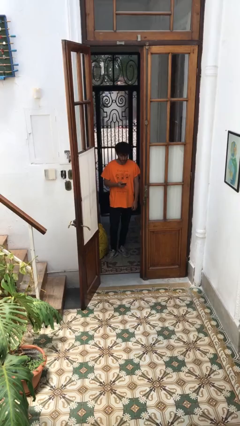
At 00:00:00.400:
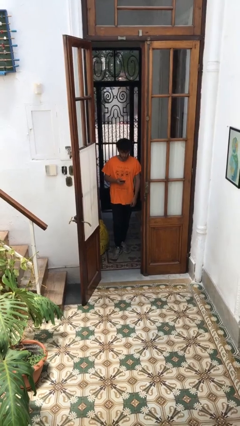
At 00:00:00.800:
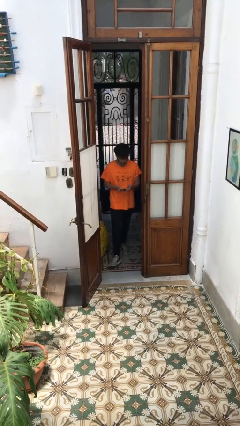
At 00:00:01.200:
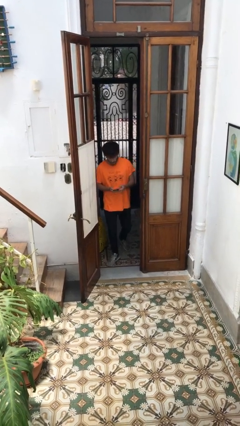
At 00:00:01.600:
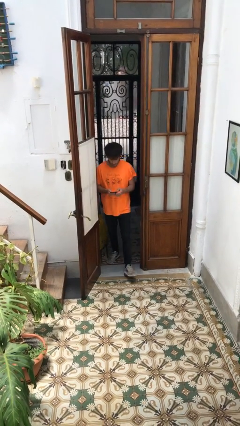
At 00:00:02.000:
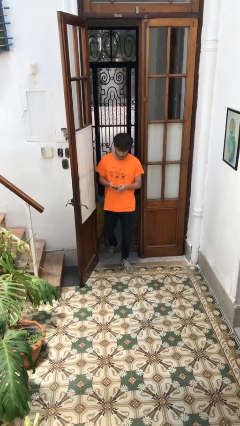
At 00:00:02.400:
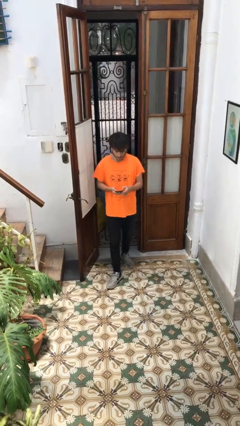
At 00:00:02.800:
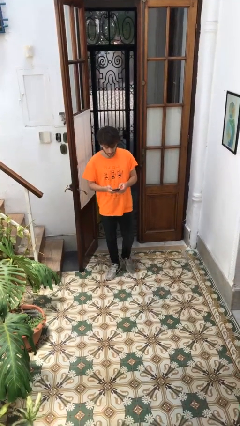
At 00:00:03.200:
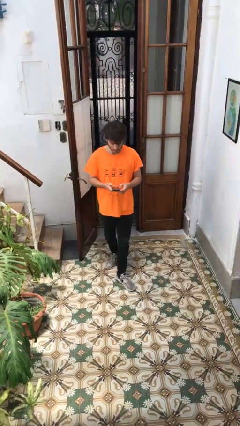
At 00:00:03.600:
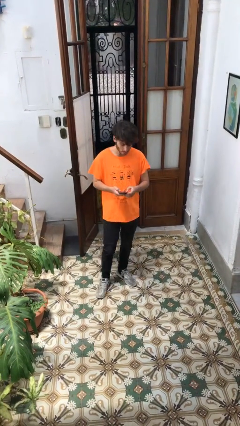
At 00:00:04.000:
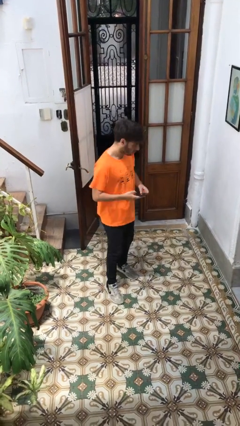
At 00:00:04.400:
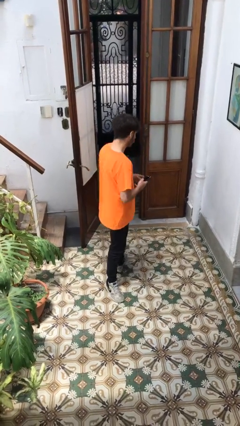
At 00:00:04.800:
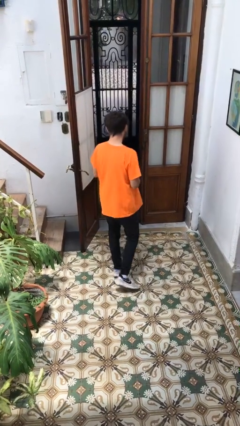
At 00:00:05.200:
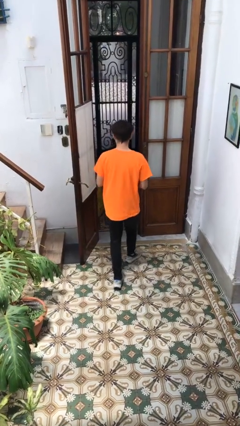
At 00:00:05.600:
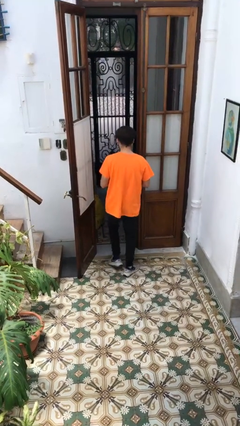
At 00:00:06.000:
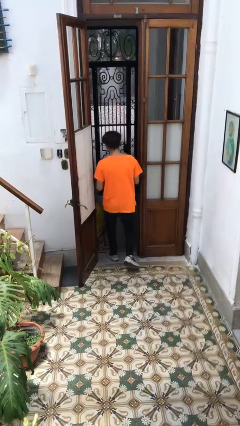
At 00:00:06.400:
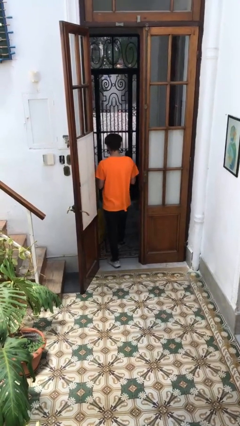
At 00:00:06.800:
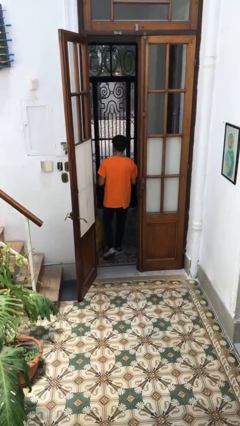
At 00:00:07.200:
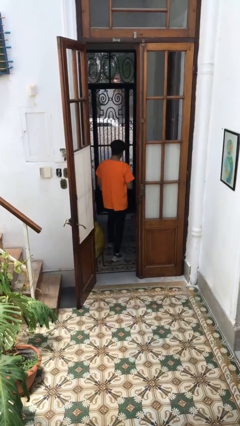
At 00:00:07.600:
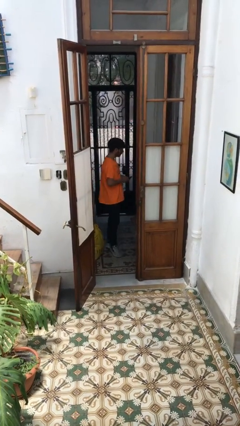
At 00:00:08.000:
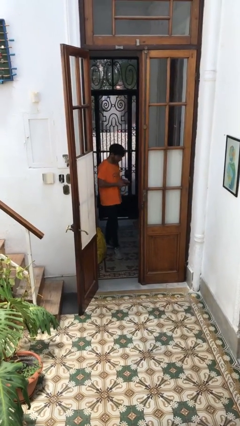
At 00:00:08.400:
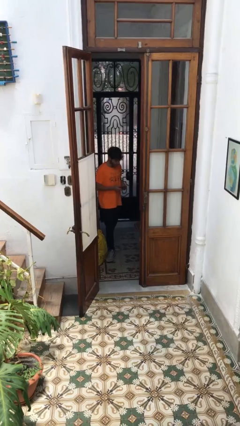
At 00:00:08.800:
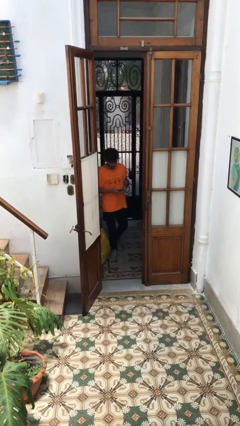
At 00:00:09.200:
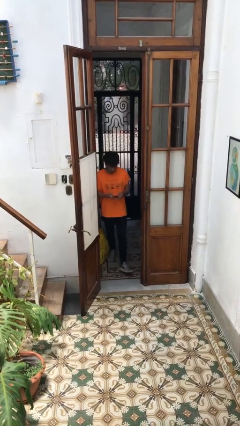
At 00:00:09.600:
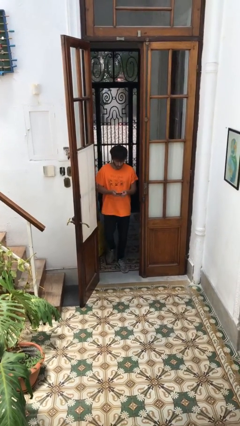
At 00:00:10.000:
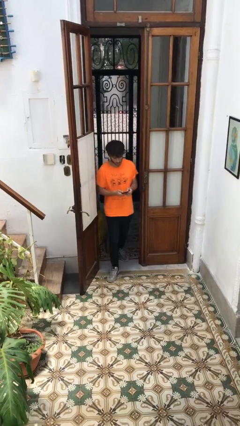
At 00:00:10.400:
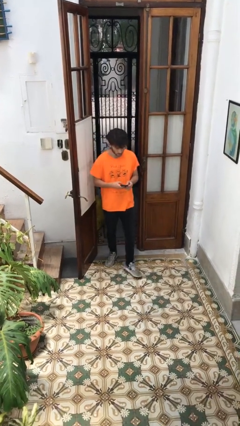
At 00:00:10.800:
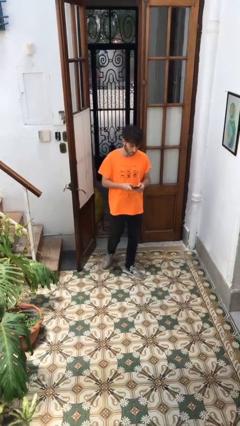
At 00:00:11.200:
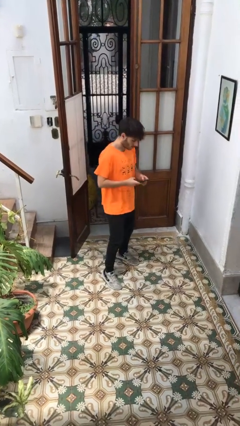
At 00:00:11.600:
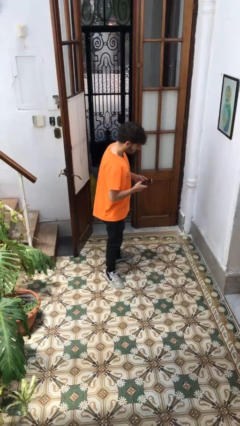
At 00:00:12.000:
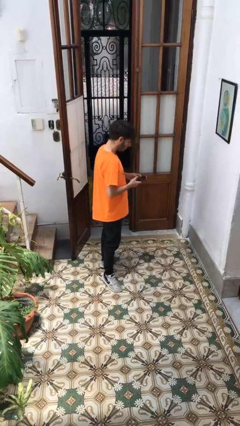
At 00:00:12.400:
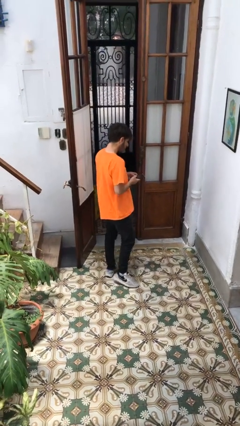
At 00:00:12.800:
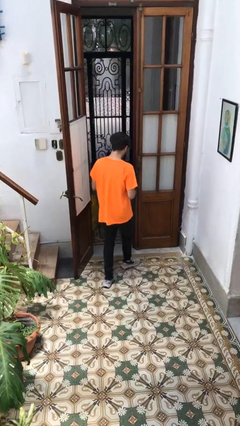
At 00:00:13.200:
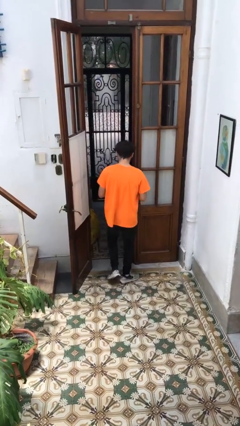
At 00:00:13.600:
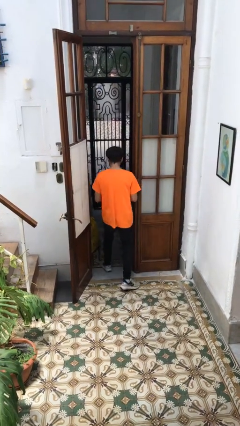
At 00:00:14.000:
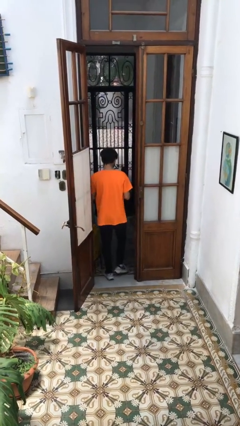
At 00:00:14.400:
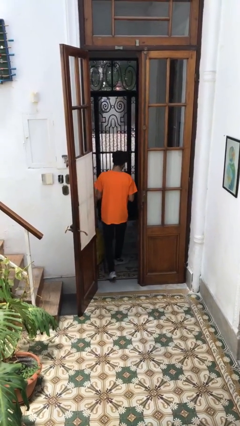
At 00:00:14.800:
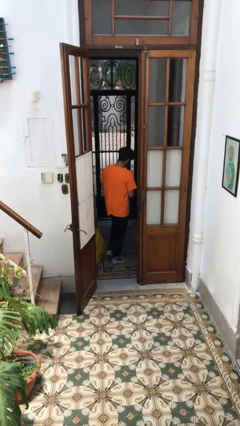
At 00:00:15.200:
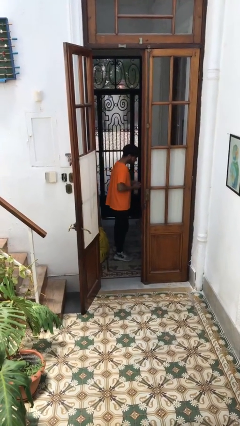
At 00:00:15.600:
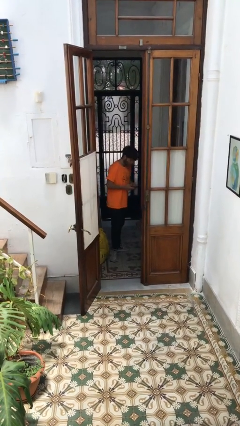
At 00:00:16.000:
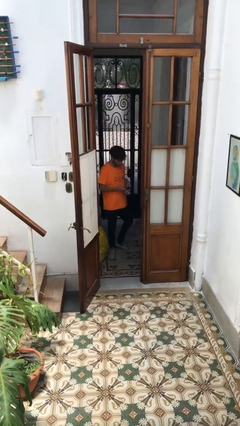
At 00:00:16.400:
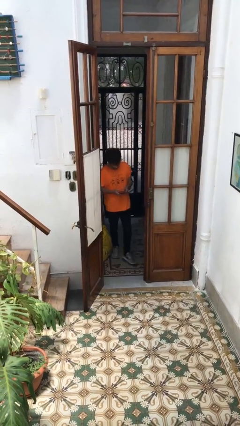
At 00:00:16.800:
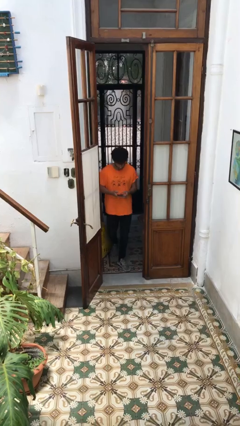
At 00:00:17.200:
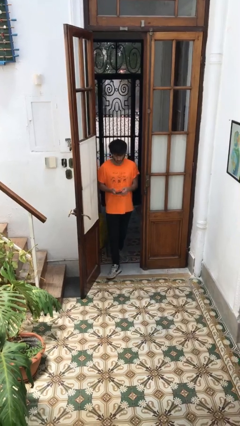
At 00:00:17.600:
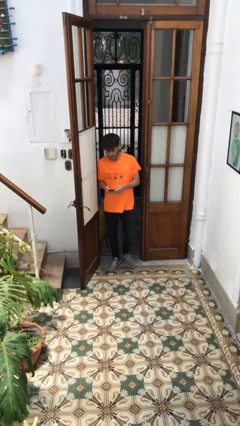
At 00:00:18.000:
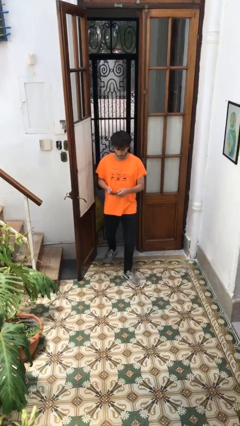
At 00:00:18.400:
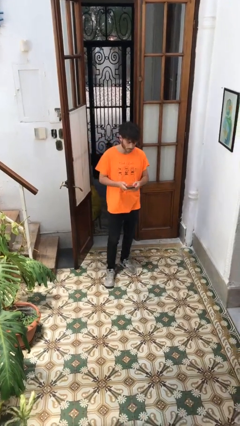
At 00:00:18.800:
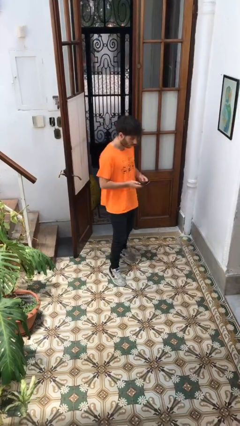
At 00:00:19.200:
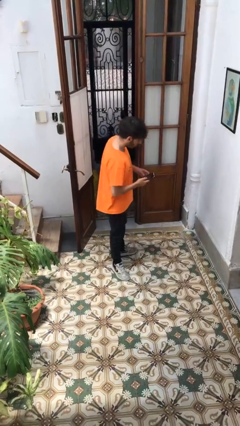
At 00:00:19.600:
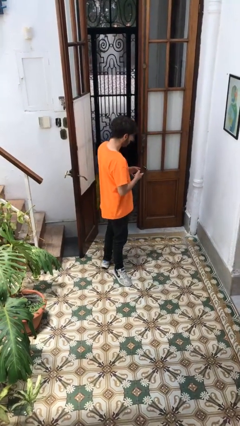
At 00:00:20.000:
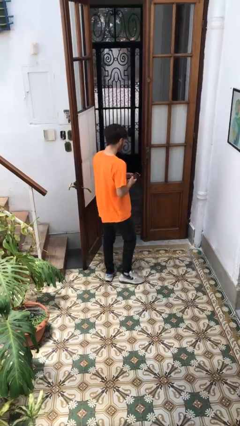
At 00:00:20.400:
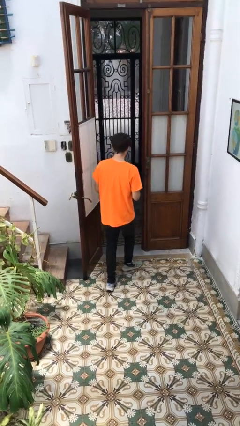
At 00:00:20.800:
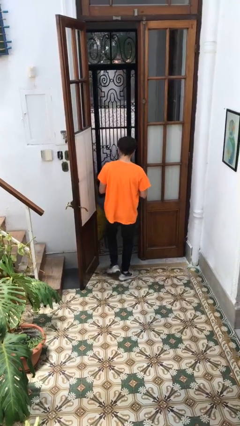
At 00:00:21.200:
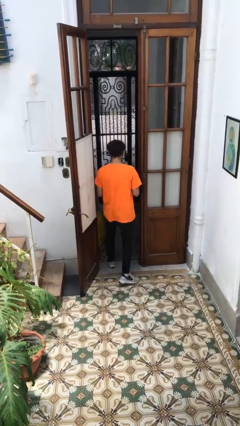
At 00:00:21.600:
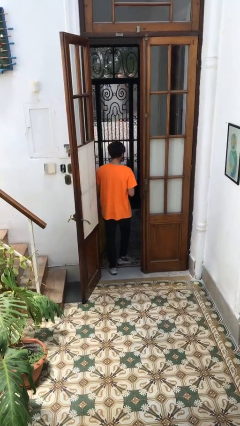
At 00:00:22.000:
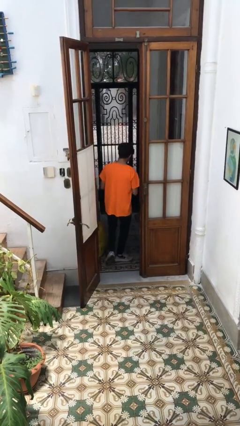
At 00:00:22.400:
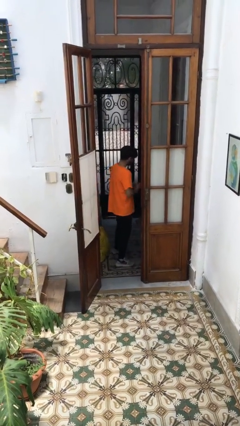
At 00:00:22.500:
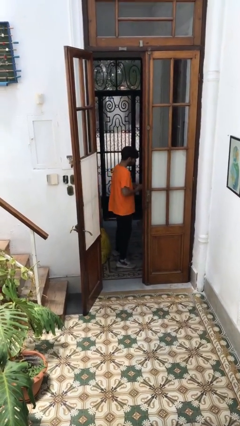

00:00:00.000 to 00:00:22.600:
person texts on phone

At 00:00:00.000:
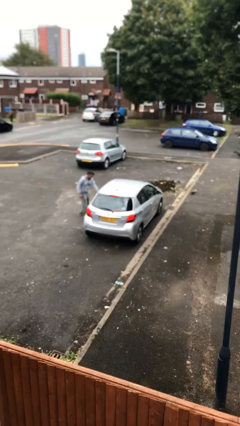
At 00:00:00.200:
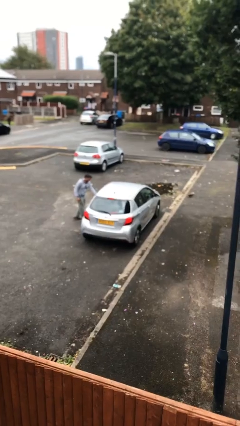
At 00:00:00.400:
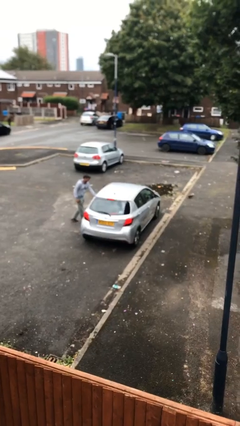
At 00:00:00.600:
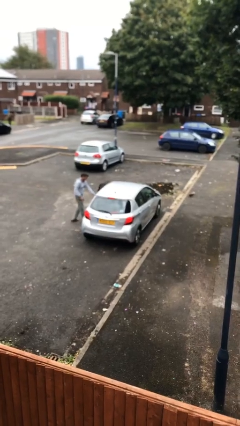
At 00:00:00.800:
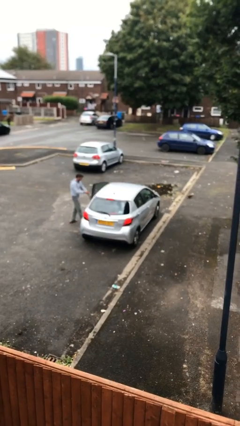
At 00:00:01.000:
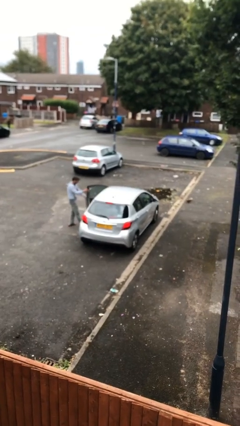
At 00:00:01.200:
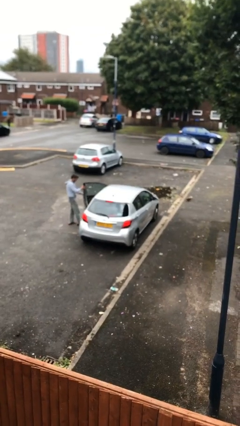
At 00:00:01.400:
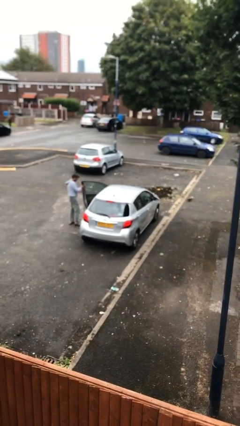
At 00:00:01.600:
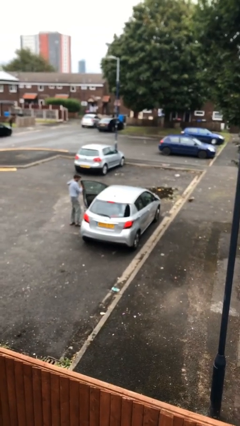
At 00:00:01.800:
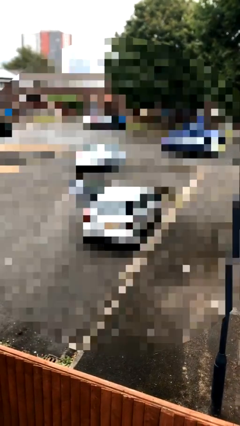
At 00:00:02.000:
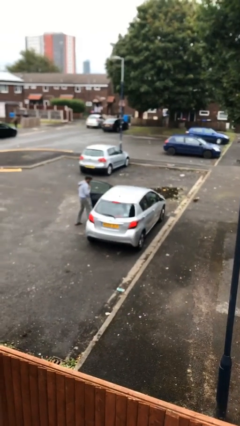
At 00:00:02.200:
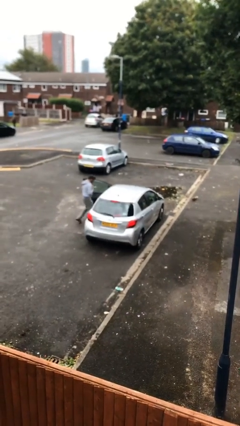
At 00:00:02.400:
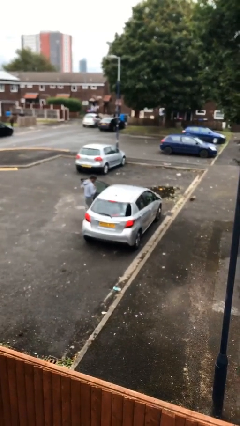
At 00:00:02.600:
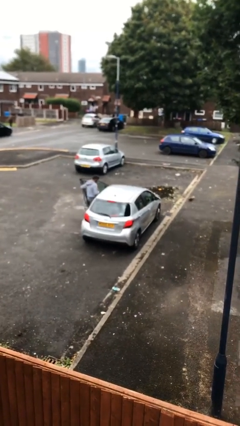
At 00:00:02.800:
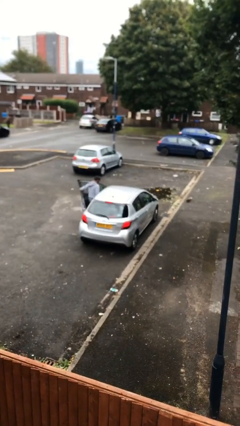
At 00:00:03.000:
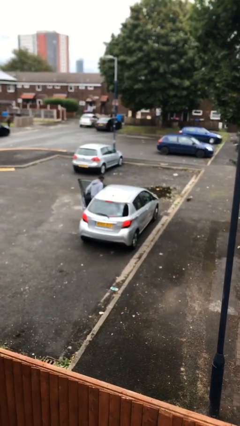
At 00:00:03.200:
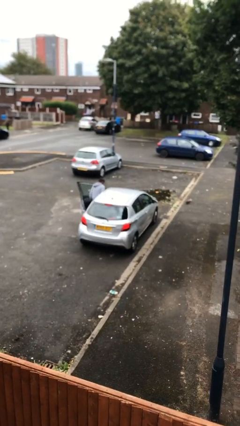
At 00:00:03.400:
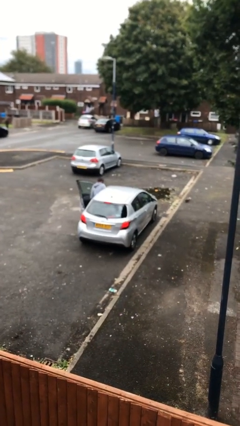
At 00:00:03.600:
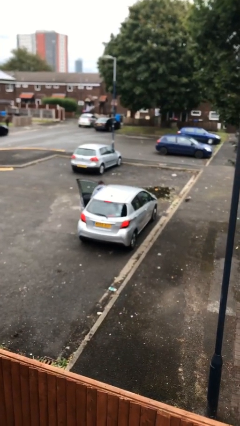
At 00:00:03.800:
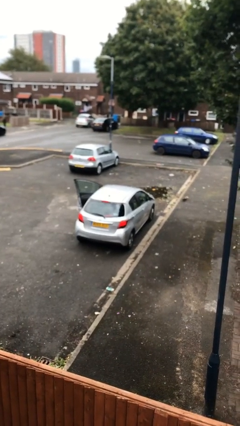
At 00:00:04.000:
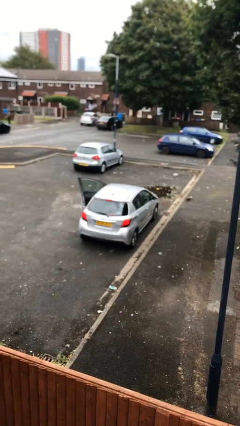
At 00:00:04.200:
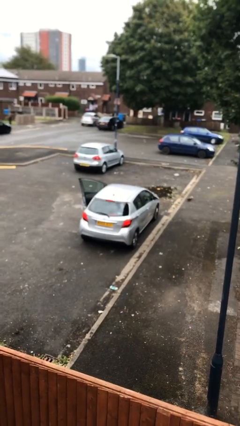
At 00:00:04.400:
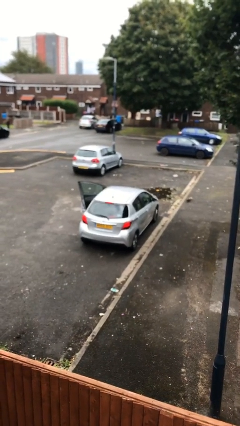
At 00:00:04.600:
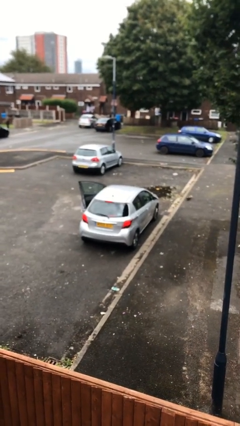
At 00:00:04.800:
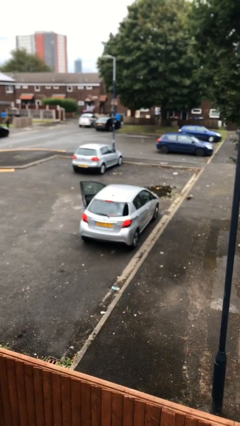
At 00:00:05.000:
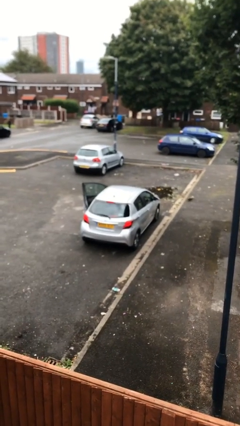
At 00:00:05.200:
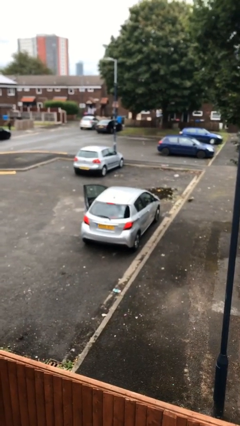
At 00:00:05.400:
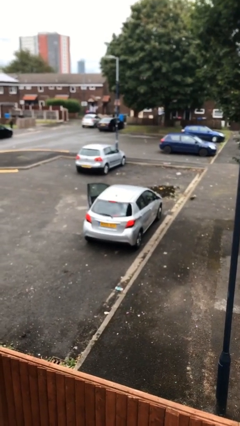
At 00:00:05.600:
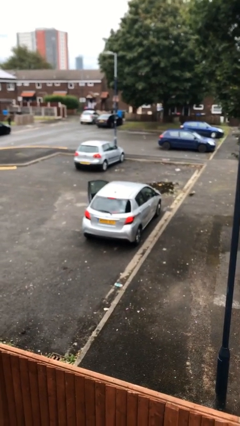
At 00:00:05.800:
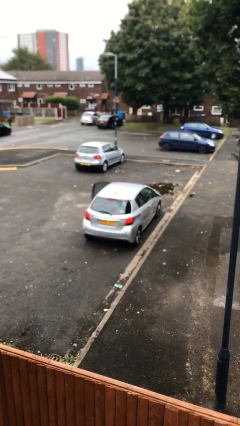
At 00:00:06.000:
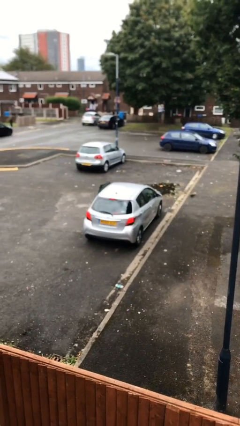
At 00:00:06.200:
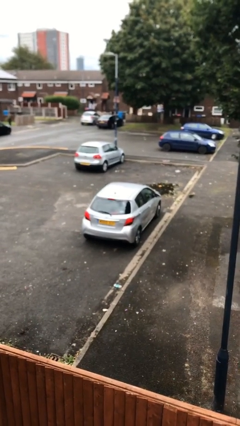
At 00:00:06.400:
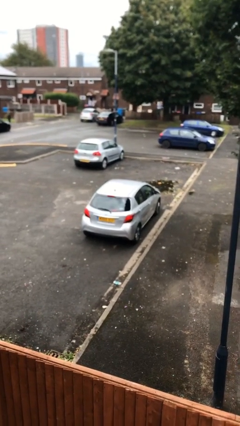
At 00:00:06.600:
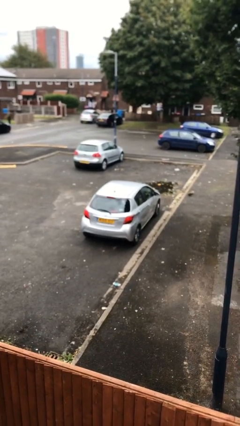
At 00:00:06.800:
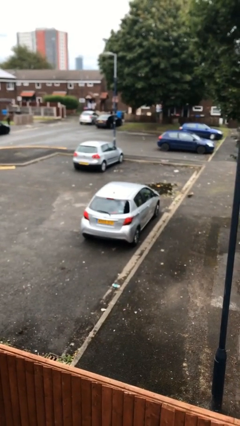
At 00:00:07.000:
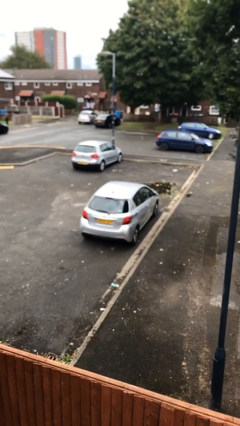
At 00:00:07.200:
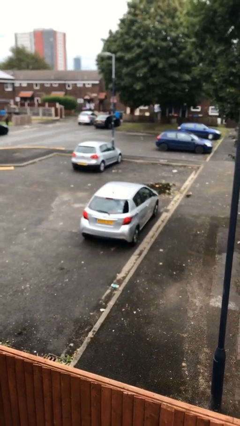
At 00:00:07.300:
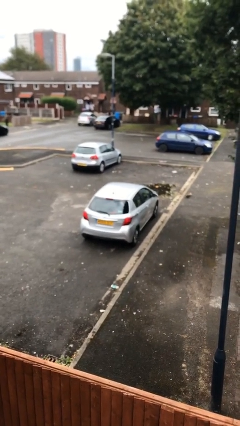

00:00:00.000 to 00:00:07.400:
car picks up person
